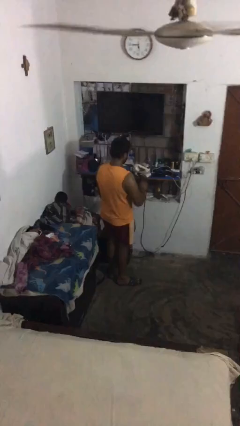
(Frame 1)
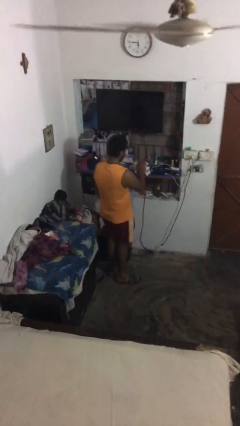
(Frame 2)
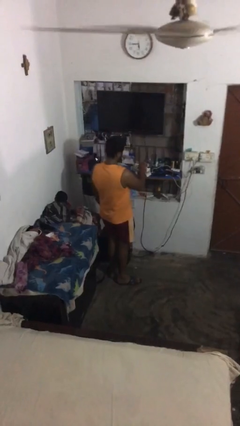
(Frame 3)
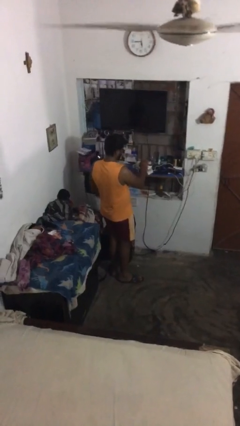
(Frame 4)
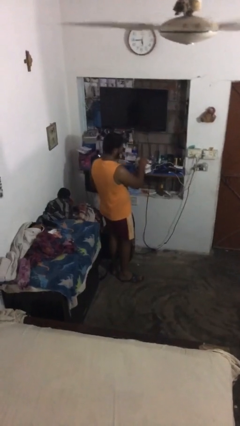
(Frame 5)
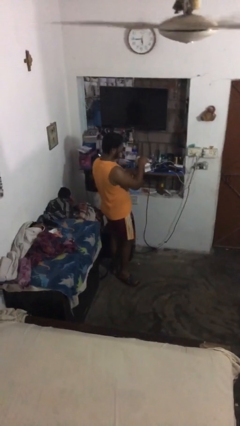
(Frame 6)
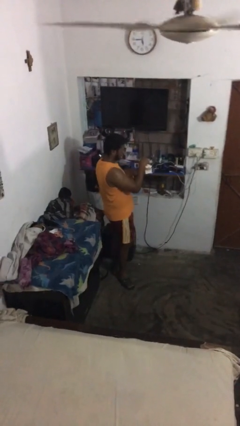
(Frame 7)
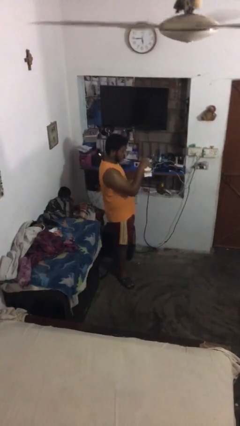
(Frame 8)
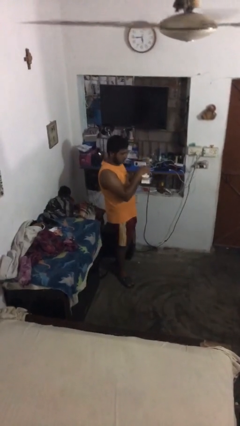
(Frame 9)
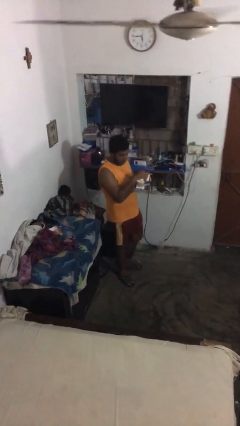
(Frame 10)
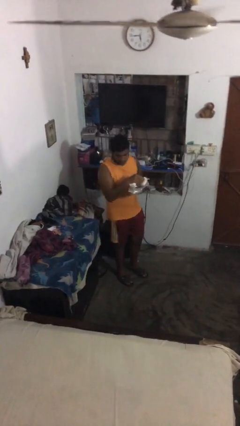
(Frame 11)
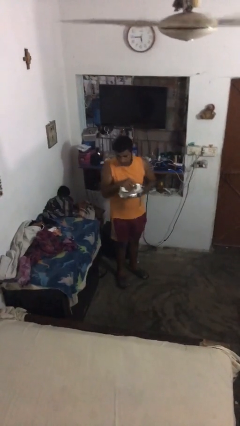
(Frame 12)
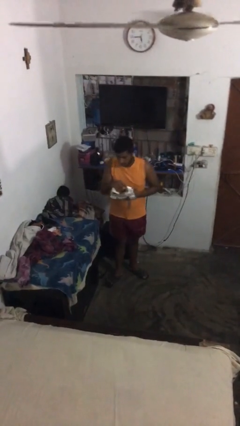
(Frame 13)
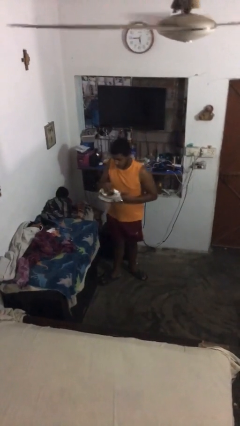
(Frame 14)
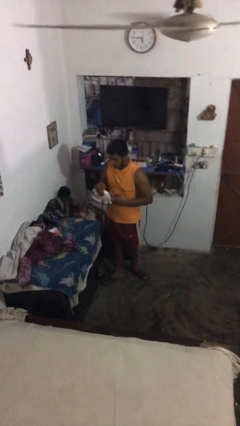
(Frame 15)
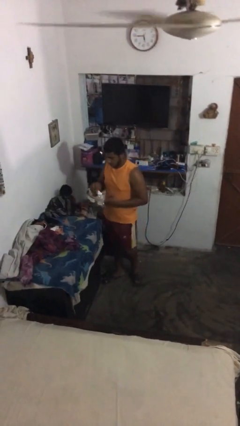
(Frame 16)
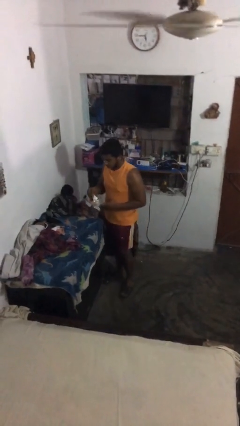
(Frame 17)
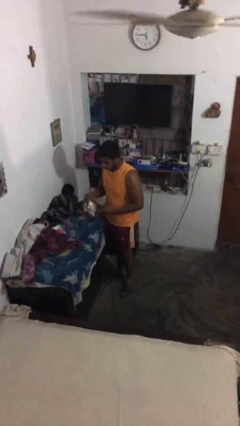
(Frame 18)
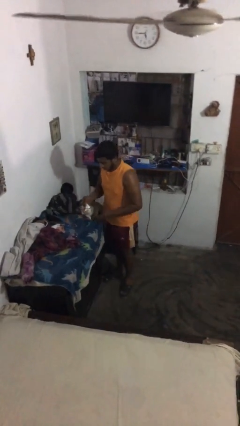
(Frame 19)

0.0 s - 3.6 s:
person picks up object from shelf

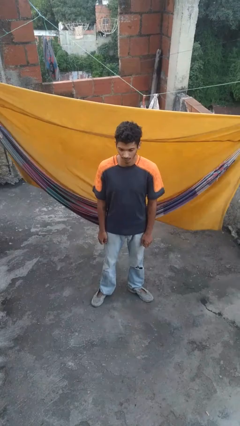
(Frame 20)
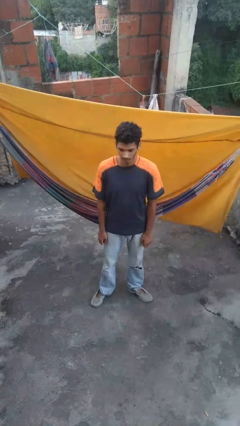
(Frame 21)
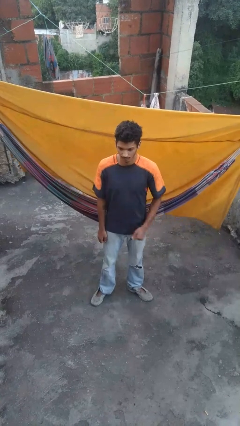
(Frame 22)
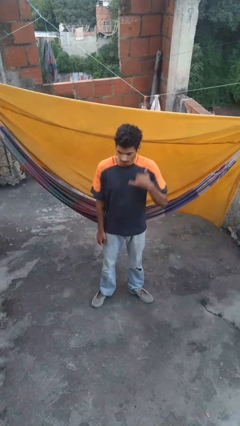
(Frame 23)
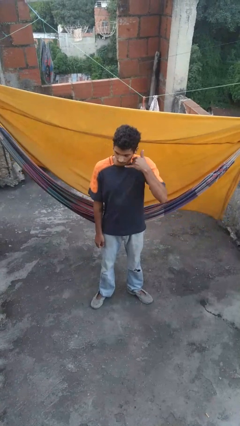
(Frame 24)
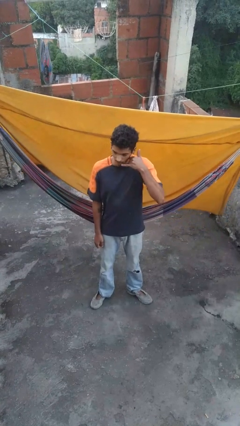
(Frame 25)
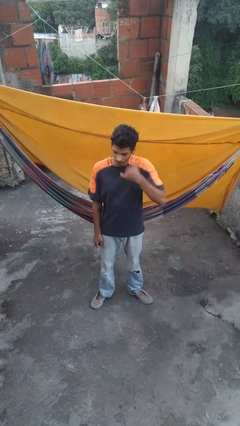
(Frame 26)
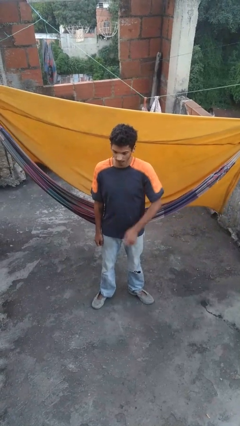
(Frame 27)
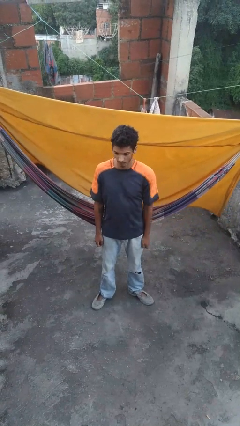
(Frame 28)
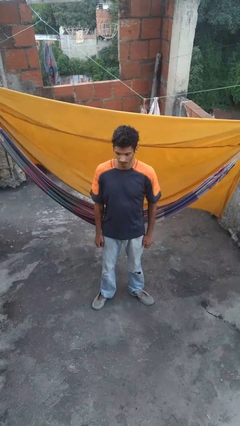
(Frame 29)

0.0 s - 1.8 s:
person gestures call me

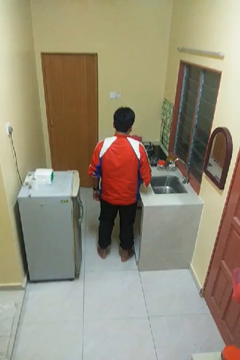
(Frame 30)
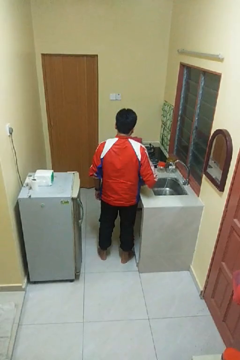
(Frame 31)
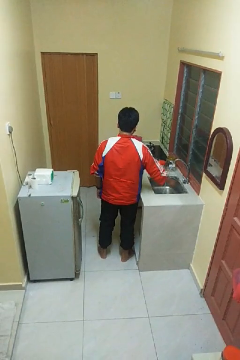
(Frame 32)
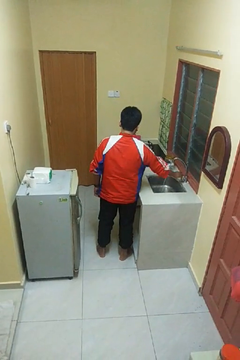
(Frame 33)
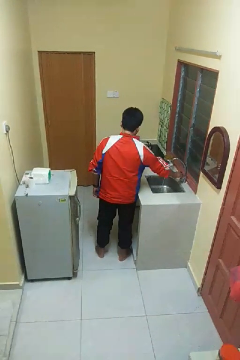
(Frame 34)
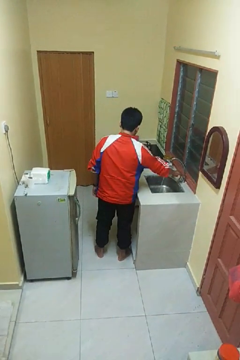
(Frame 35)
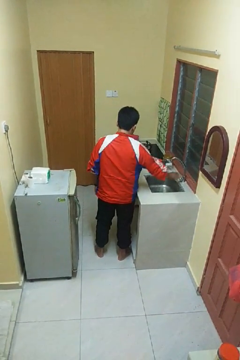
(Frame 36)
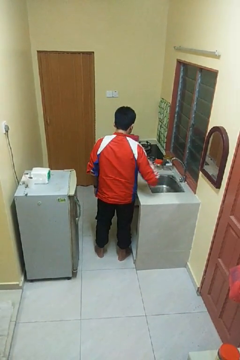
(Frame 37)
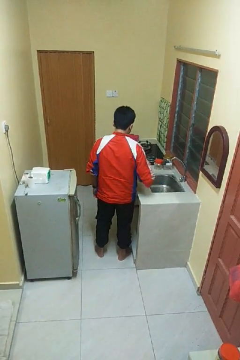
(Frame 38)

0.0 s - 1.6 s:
person turns off faucet

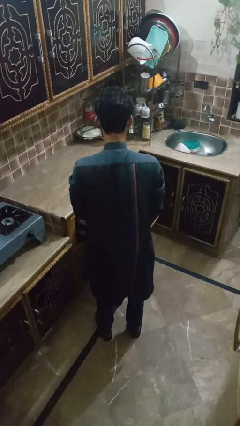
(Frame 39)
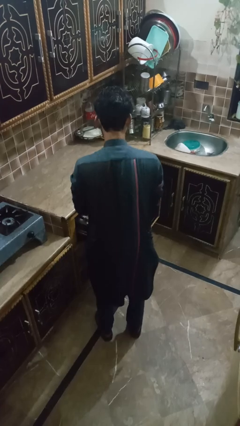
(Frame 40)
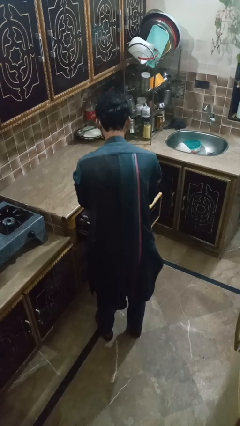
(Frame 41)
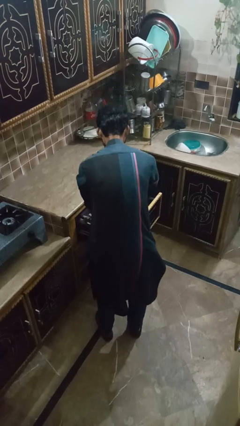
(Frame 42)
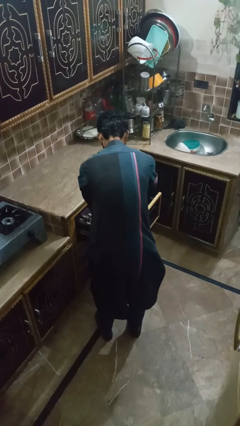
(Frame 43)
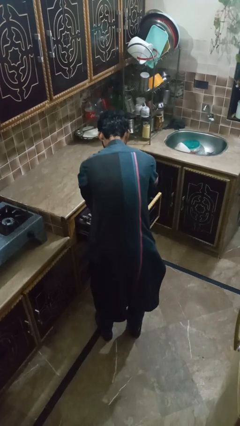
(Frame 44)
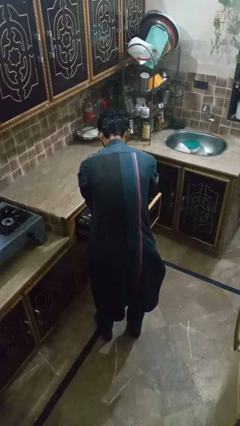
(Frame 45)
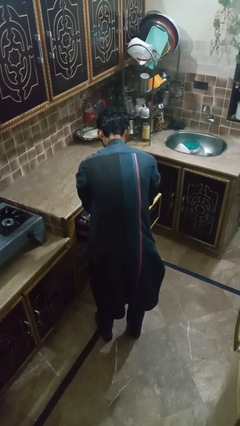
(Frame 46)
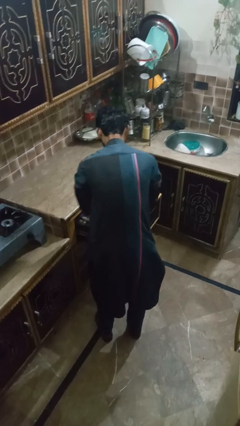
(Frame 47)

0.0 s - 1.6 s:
person searches in kitchen drawer

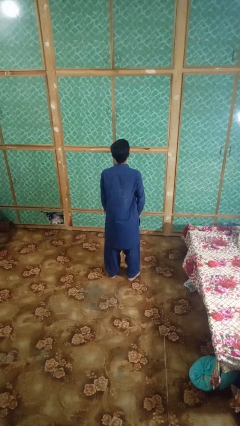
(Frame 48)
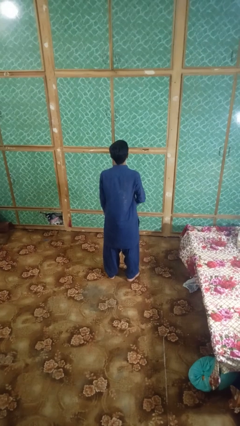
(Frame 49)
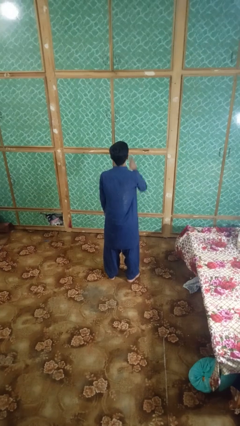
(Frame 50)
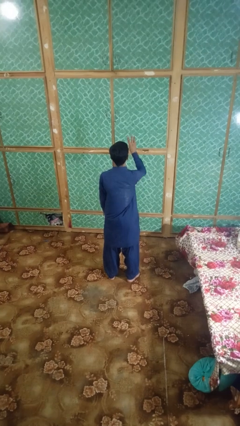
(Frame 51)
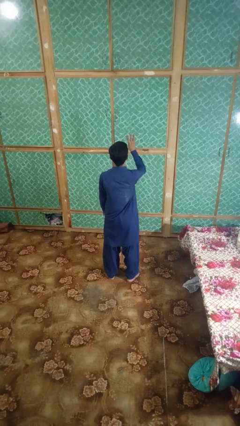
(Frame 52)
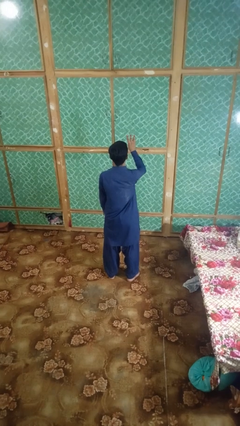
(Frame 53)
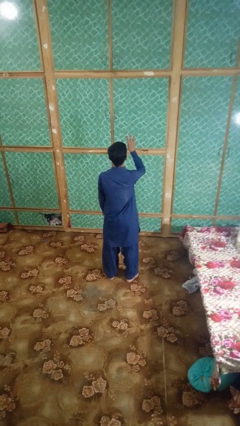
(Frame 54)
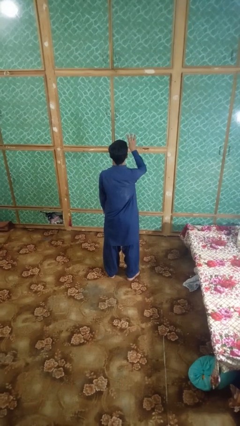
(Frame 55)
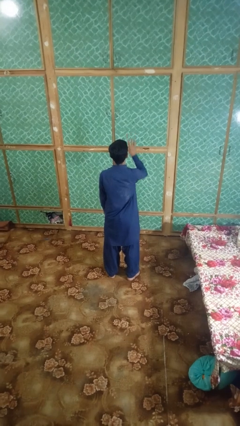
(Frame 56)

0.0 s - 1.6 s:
person gestures number three

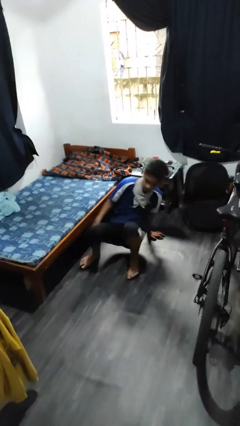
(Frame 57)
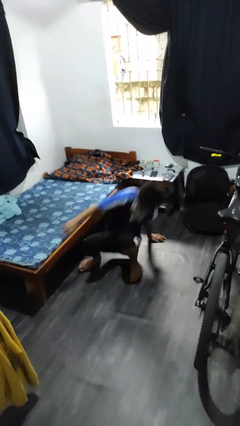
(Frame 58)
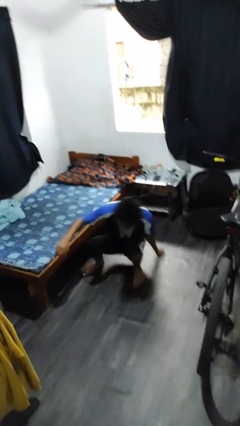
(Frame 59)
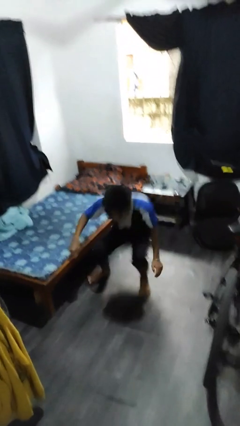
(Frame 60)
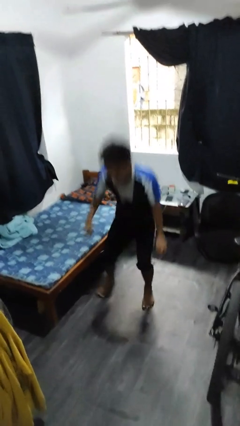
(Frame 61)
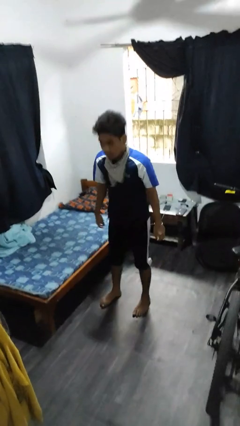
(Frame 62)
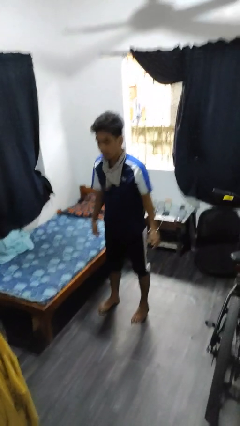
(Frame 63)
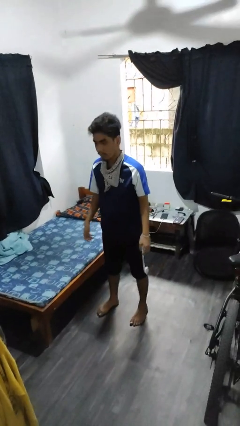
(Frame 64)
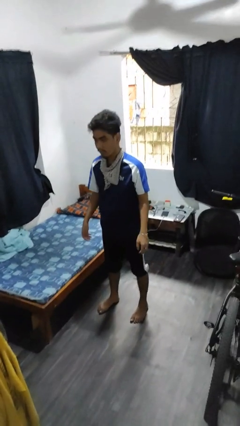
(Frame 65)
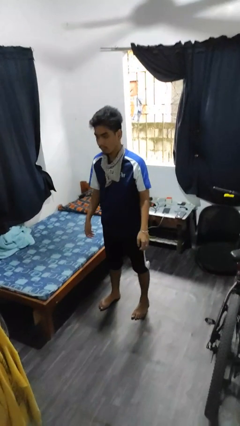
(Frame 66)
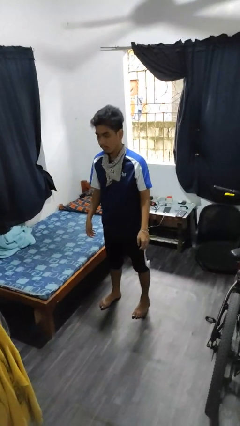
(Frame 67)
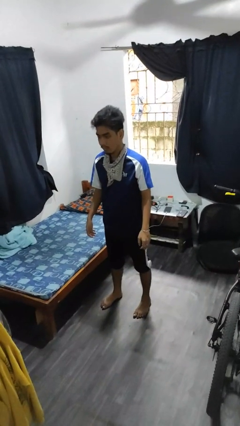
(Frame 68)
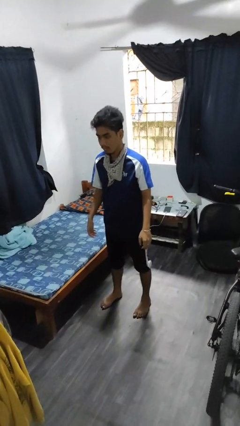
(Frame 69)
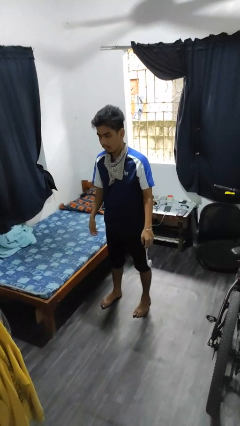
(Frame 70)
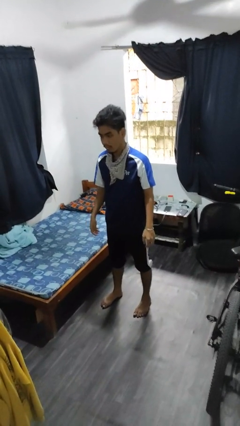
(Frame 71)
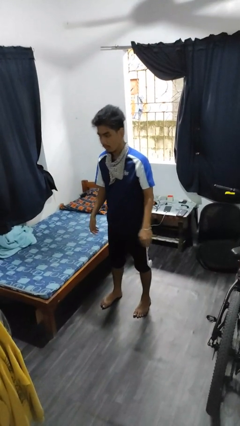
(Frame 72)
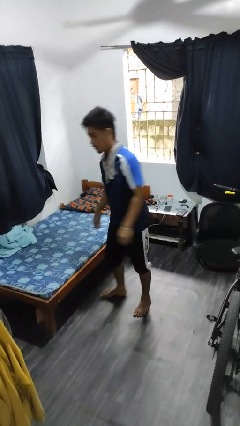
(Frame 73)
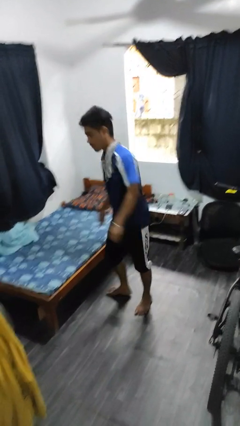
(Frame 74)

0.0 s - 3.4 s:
person stands up from floor

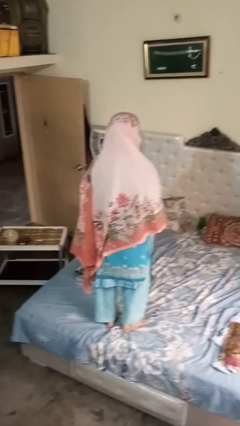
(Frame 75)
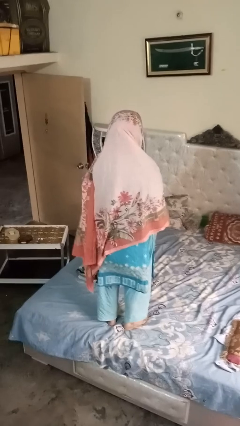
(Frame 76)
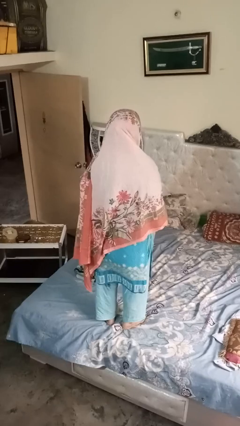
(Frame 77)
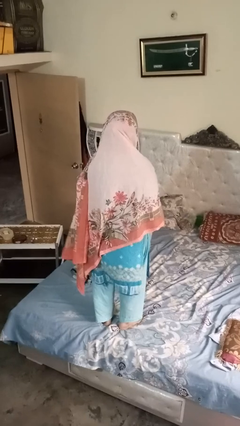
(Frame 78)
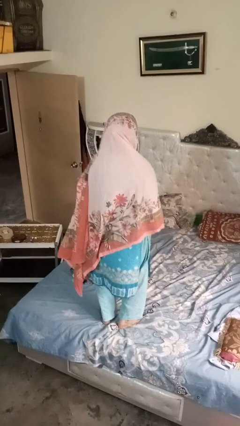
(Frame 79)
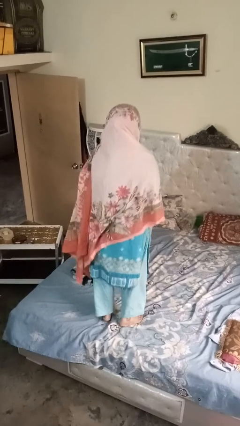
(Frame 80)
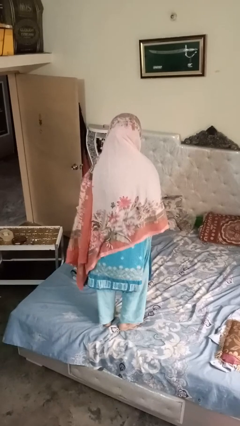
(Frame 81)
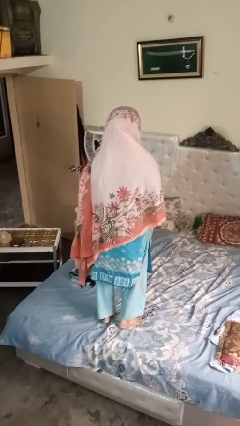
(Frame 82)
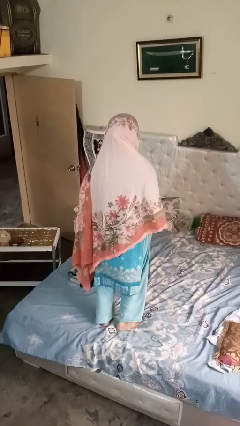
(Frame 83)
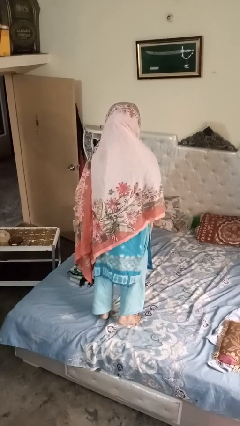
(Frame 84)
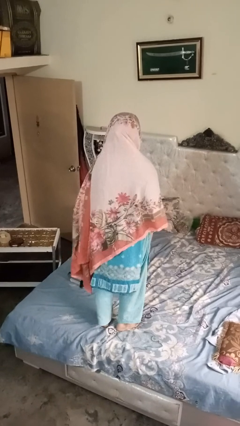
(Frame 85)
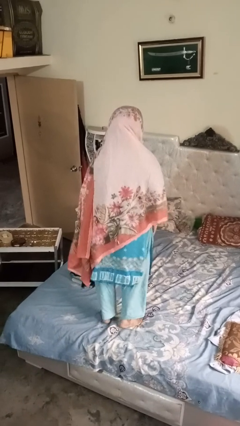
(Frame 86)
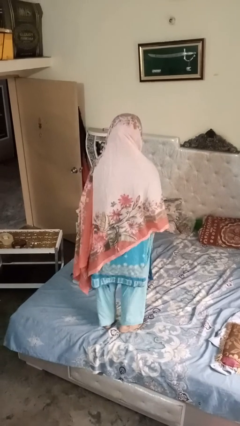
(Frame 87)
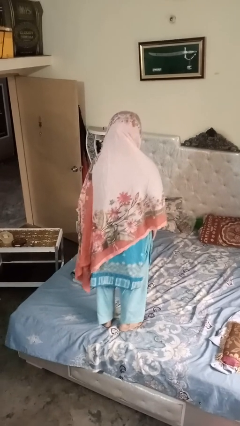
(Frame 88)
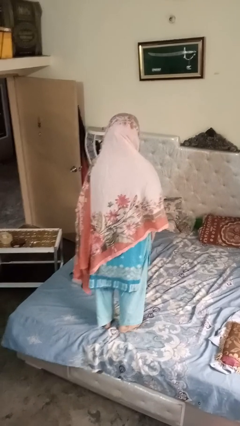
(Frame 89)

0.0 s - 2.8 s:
person jumps on bed

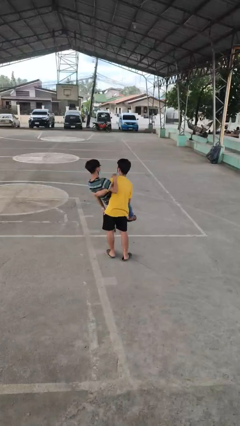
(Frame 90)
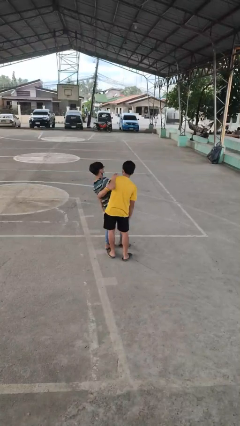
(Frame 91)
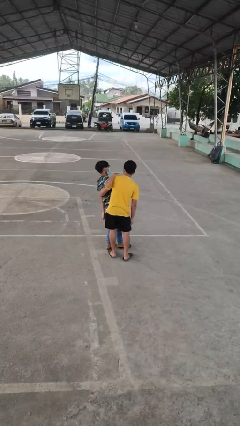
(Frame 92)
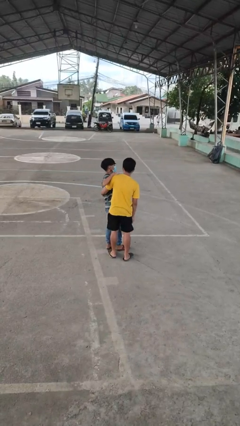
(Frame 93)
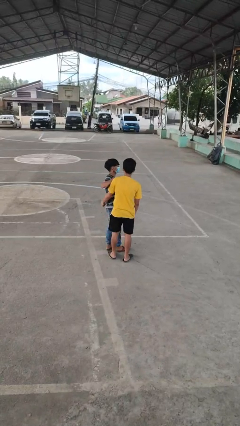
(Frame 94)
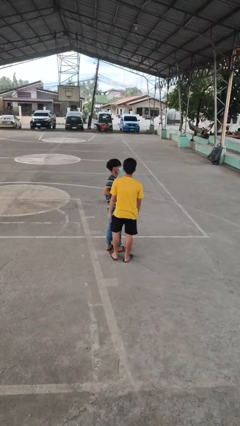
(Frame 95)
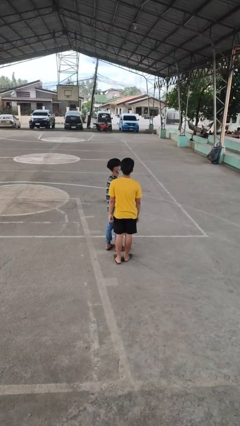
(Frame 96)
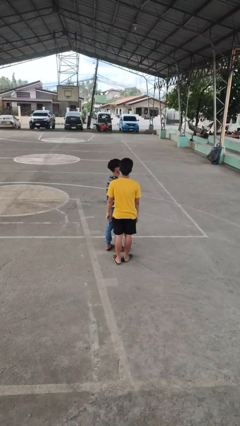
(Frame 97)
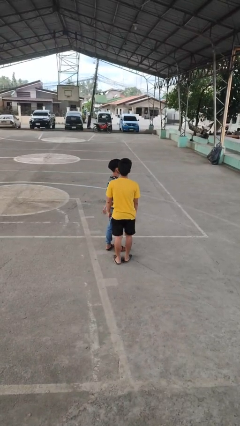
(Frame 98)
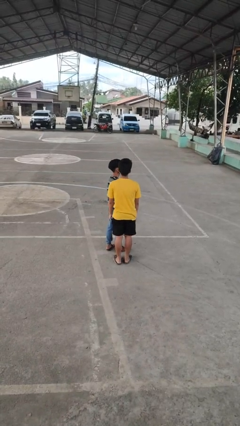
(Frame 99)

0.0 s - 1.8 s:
person puts down person
